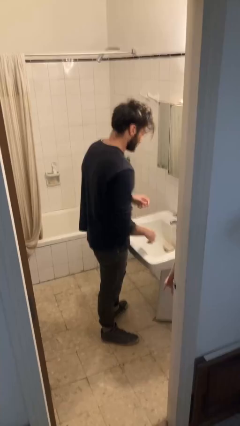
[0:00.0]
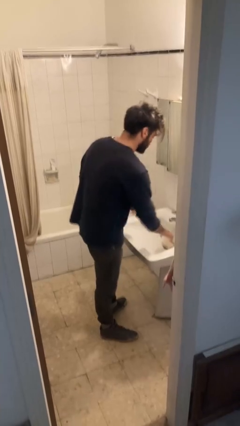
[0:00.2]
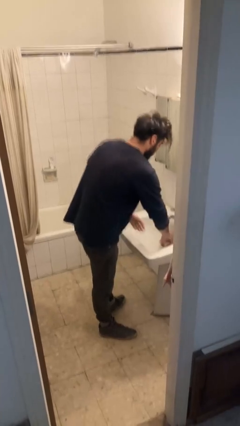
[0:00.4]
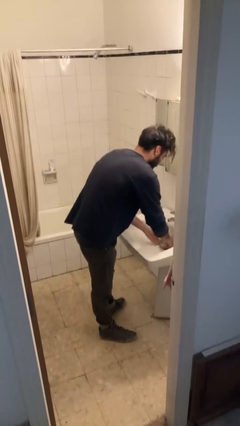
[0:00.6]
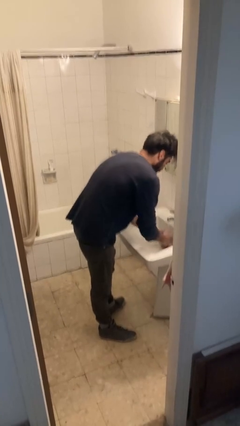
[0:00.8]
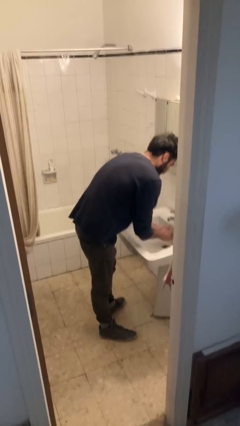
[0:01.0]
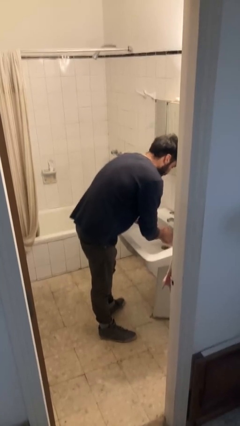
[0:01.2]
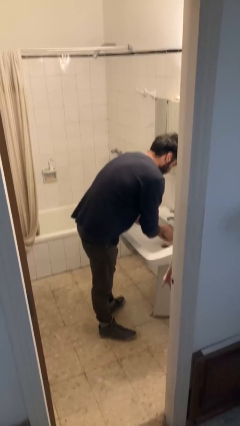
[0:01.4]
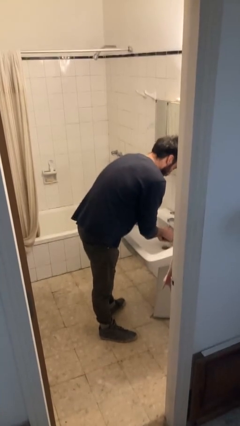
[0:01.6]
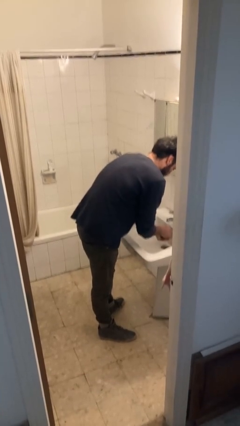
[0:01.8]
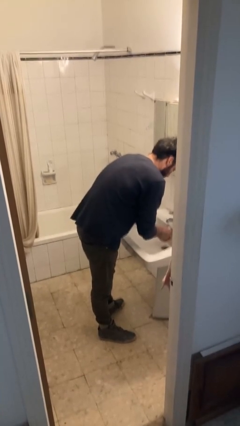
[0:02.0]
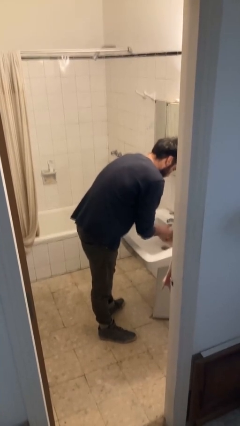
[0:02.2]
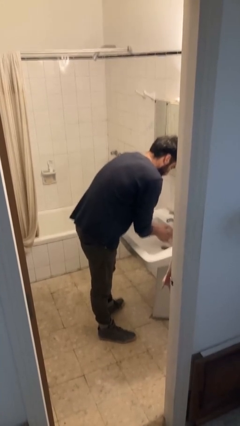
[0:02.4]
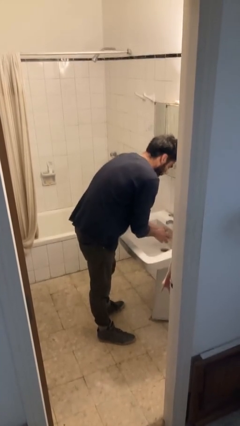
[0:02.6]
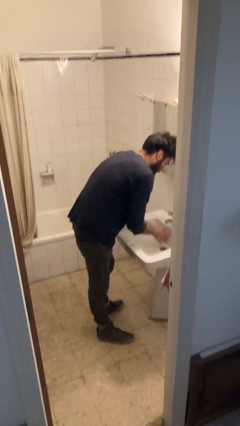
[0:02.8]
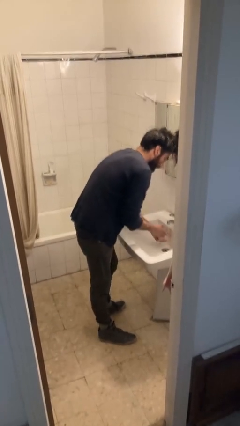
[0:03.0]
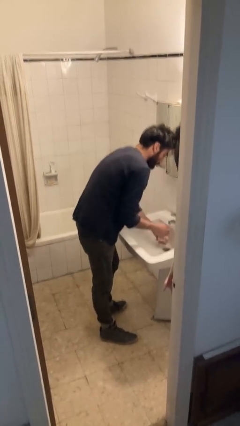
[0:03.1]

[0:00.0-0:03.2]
person washes hands

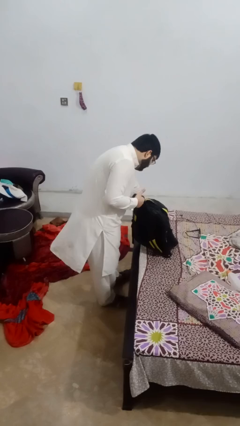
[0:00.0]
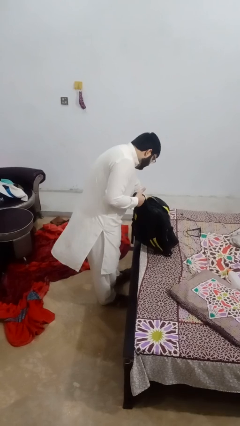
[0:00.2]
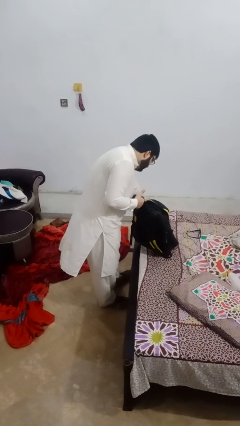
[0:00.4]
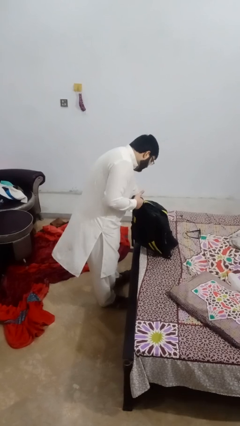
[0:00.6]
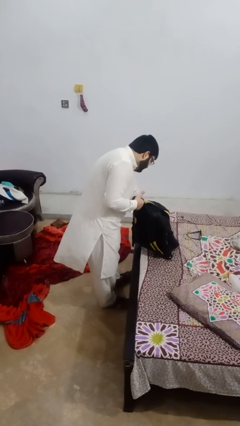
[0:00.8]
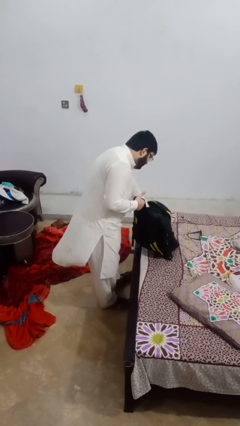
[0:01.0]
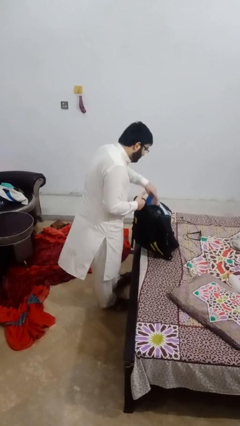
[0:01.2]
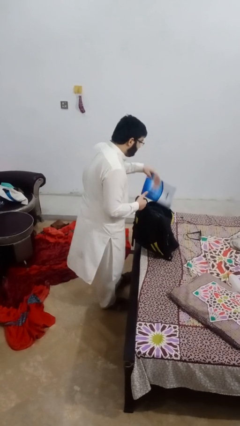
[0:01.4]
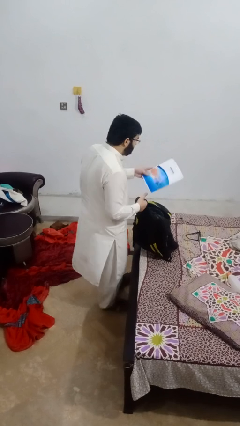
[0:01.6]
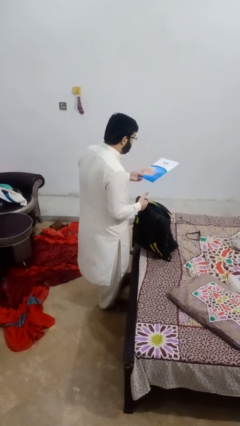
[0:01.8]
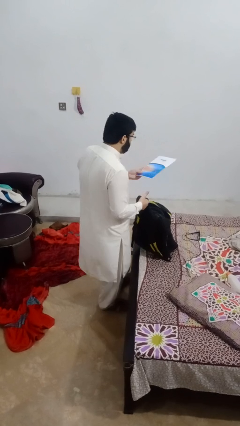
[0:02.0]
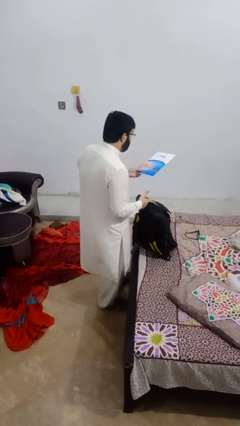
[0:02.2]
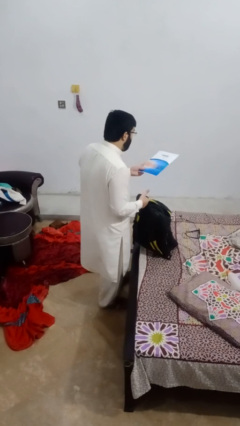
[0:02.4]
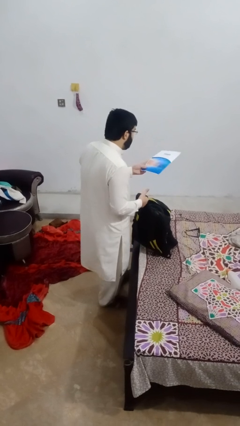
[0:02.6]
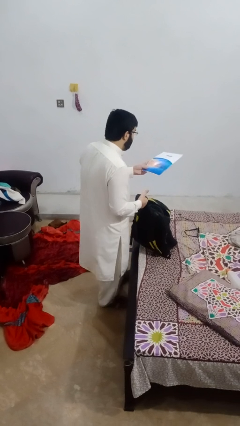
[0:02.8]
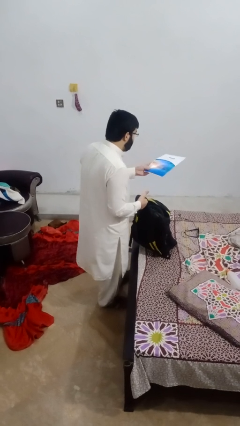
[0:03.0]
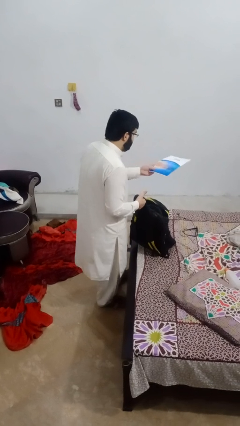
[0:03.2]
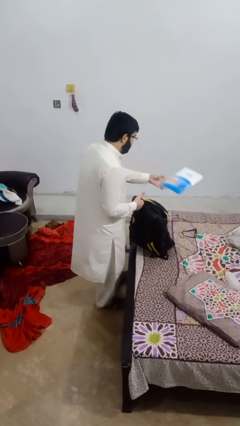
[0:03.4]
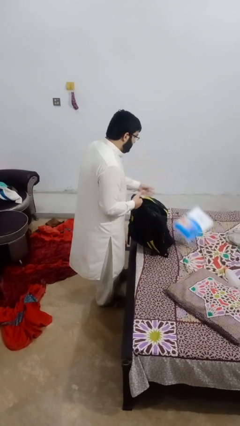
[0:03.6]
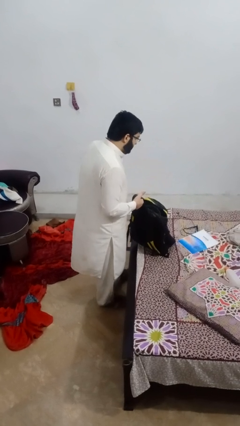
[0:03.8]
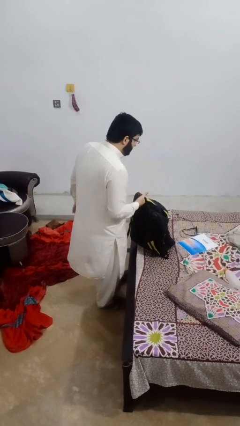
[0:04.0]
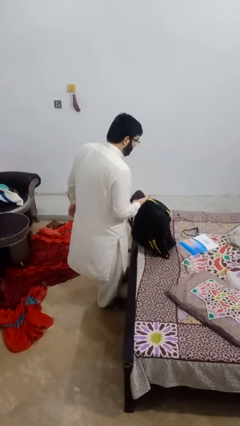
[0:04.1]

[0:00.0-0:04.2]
person takes object from backpack

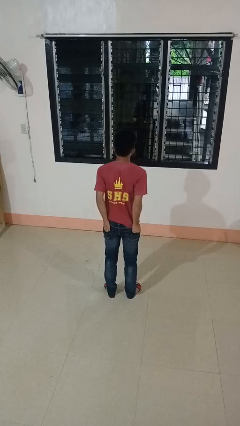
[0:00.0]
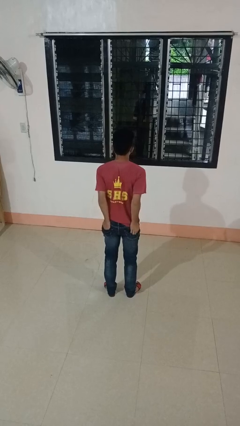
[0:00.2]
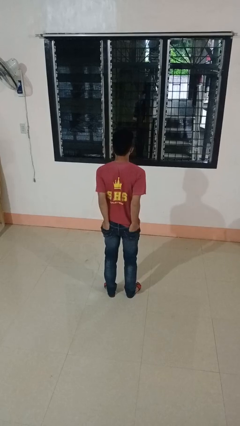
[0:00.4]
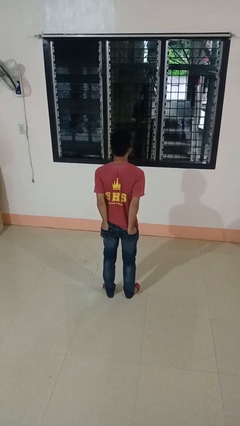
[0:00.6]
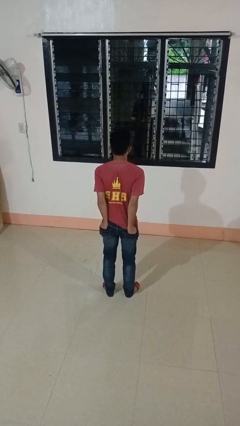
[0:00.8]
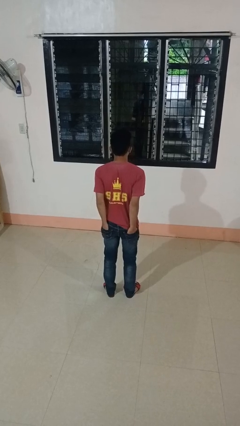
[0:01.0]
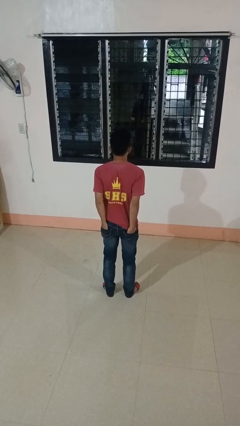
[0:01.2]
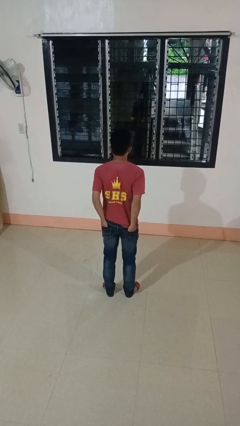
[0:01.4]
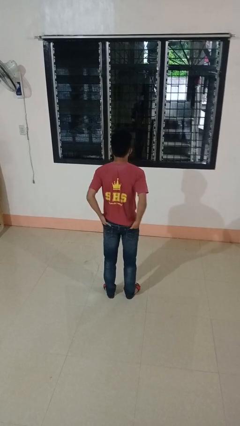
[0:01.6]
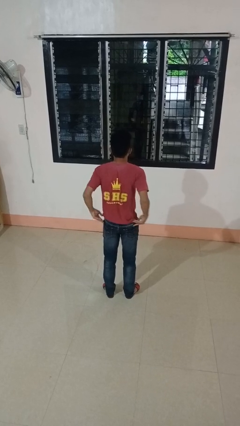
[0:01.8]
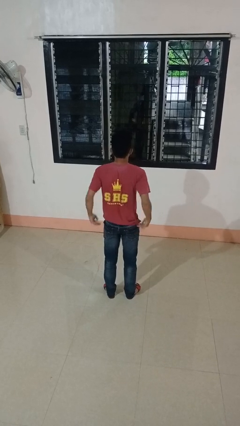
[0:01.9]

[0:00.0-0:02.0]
person puts hands in back pockets

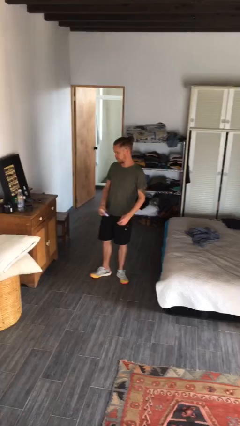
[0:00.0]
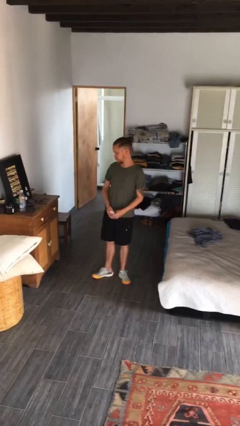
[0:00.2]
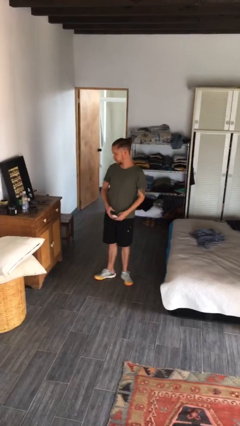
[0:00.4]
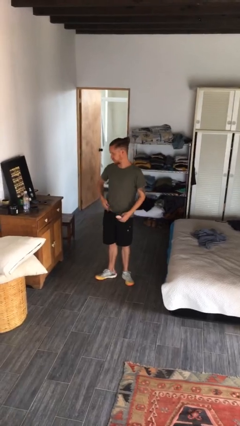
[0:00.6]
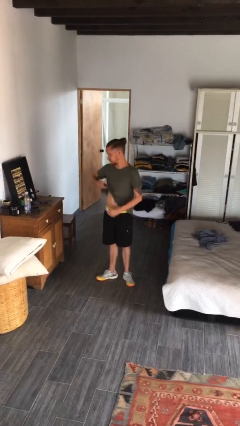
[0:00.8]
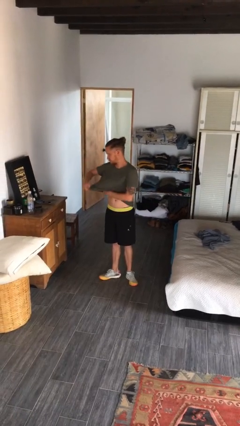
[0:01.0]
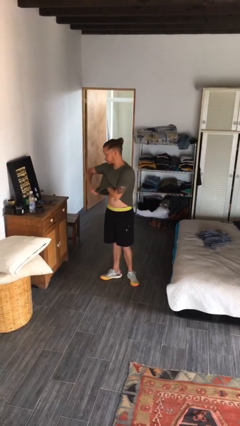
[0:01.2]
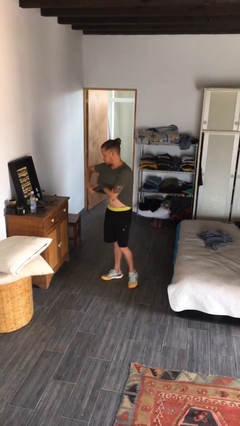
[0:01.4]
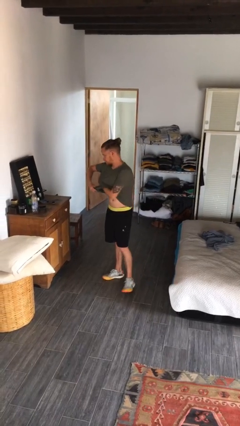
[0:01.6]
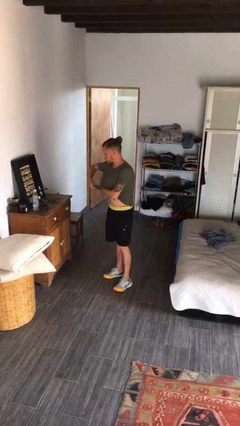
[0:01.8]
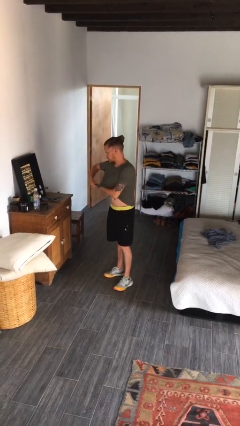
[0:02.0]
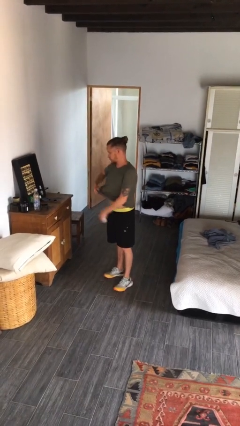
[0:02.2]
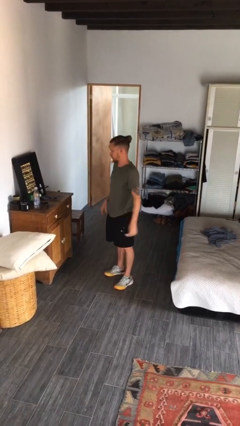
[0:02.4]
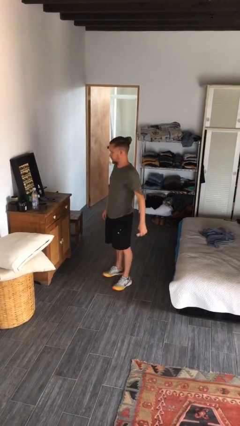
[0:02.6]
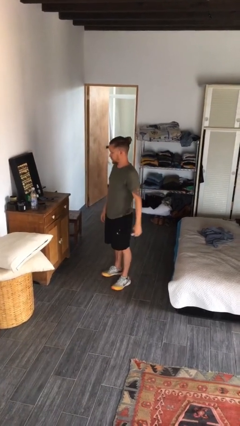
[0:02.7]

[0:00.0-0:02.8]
person applies deodorant

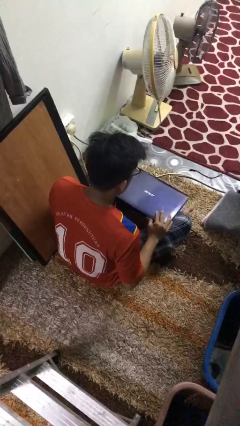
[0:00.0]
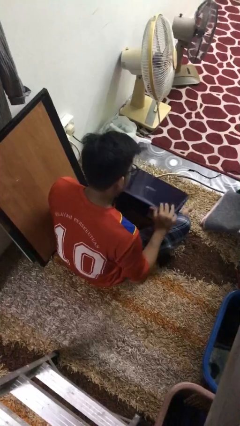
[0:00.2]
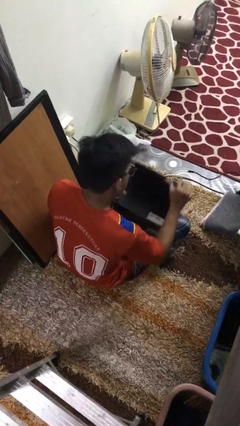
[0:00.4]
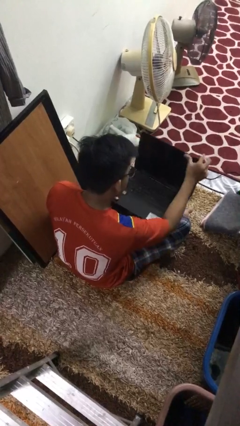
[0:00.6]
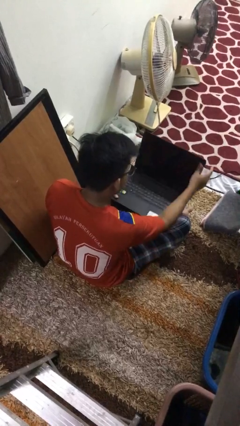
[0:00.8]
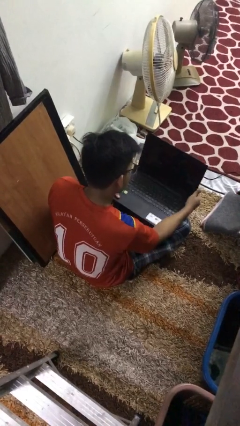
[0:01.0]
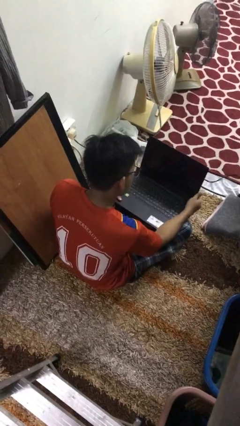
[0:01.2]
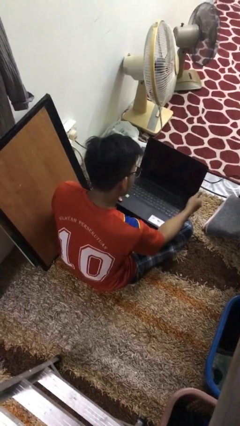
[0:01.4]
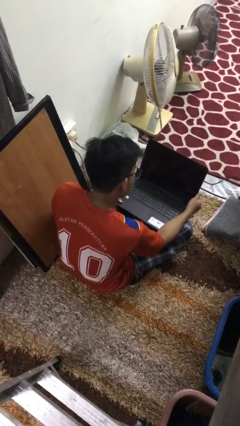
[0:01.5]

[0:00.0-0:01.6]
person opens laptop

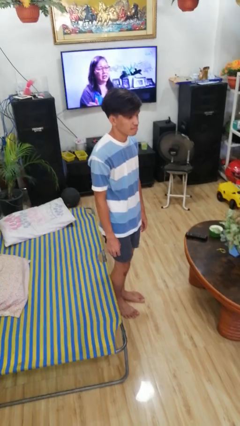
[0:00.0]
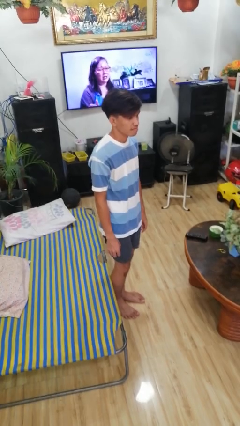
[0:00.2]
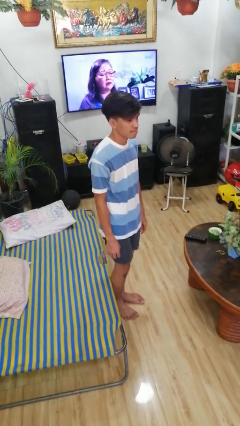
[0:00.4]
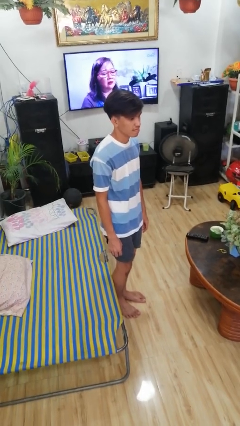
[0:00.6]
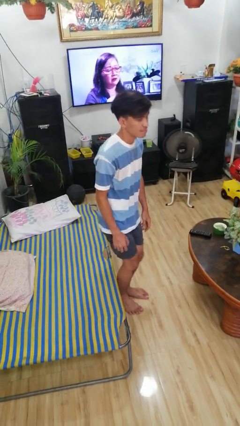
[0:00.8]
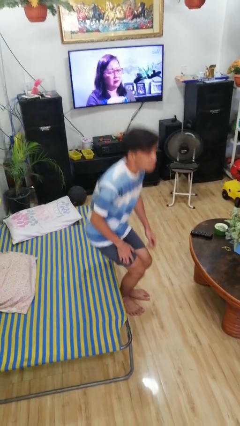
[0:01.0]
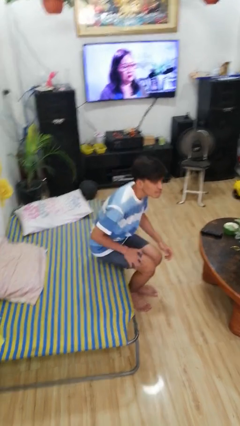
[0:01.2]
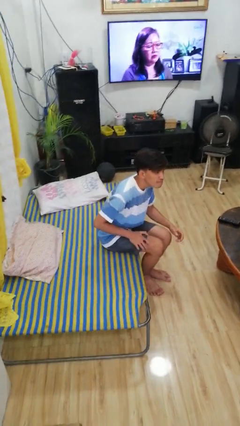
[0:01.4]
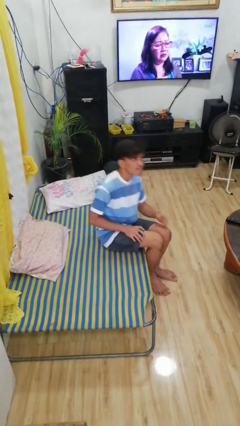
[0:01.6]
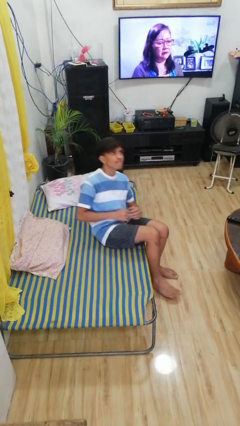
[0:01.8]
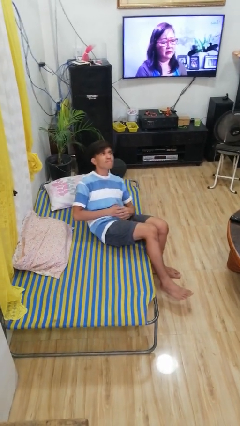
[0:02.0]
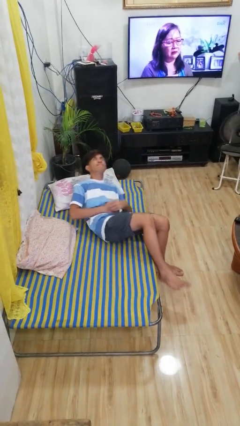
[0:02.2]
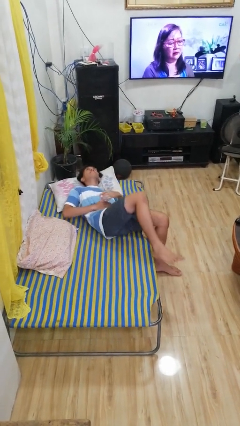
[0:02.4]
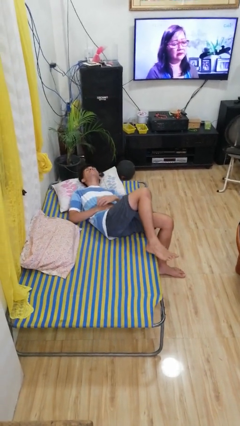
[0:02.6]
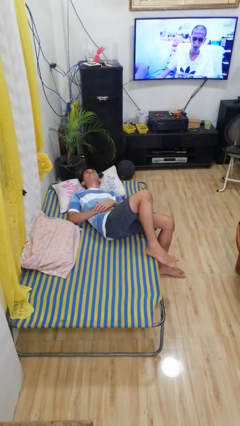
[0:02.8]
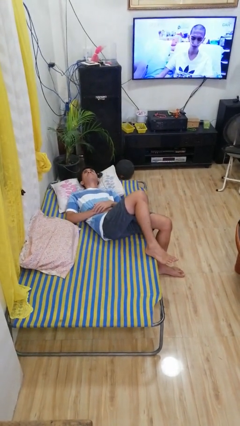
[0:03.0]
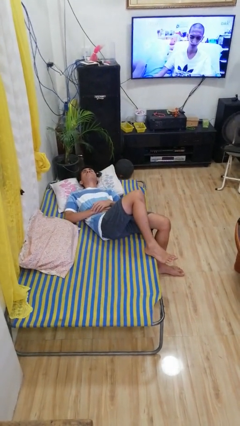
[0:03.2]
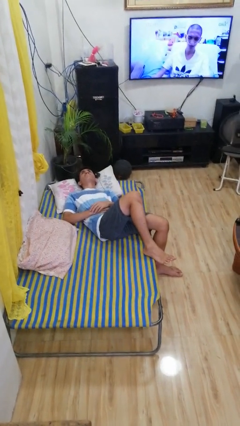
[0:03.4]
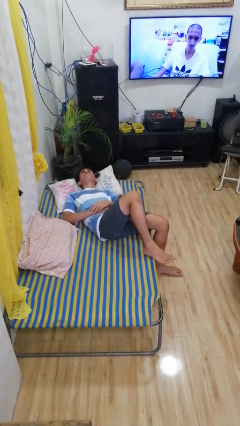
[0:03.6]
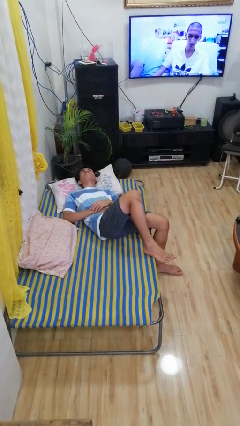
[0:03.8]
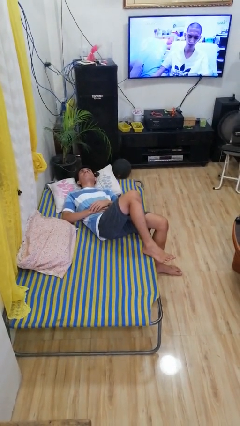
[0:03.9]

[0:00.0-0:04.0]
person lies down on bed
